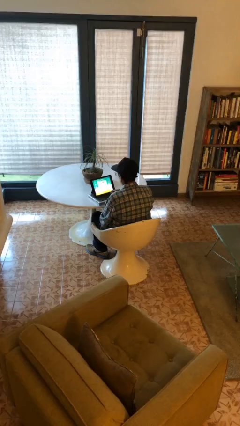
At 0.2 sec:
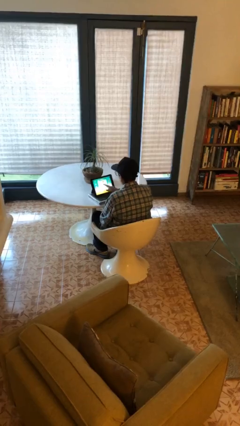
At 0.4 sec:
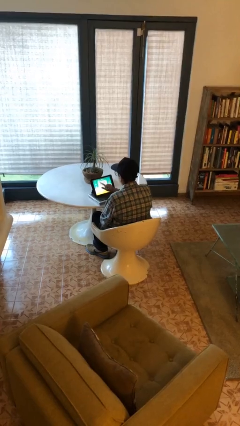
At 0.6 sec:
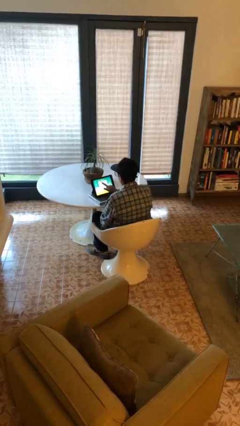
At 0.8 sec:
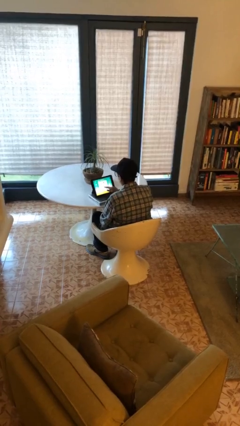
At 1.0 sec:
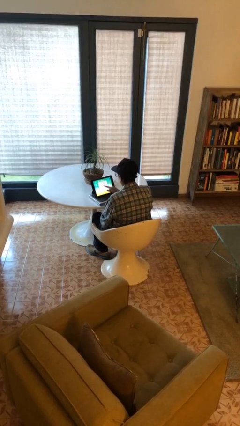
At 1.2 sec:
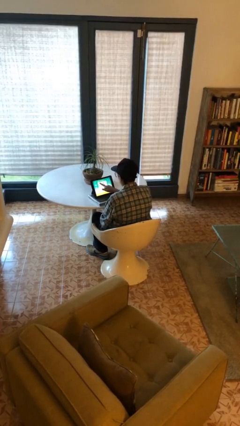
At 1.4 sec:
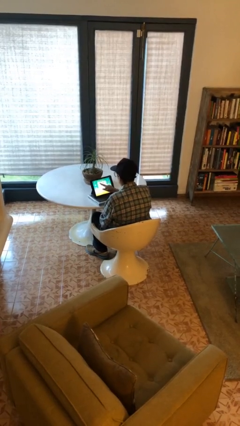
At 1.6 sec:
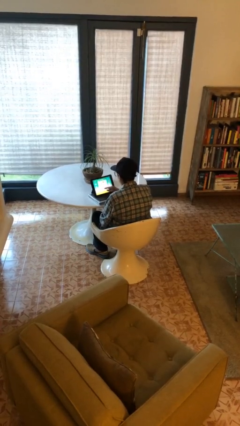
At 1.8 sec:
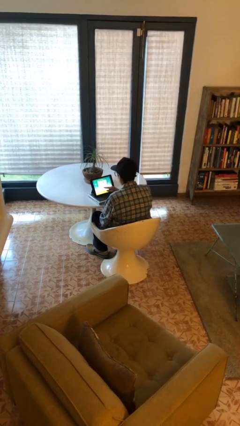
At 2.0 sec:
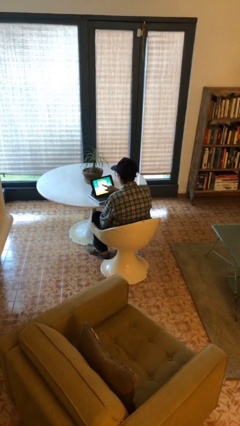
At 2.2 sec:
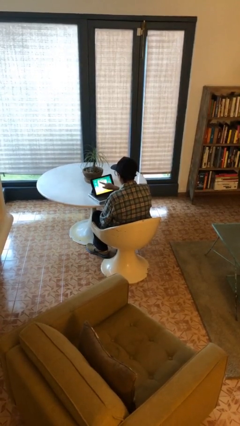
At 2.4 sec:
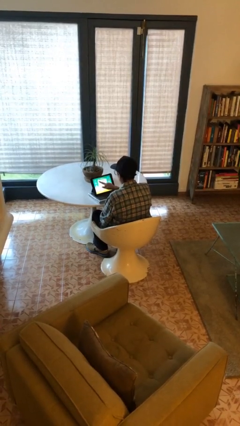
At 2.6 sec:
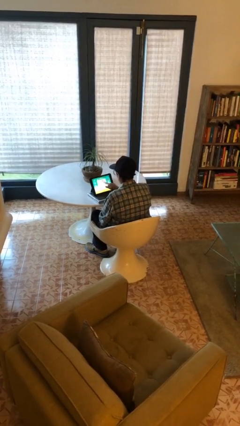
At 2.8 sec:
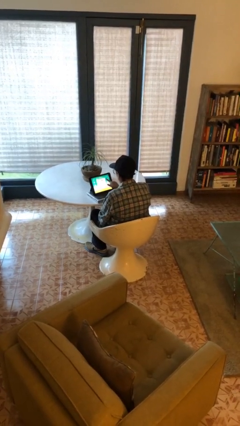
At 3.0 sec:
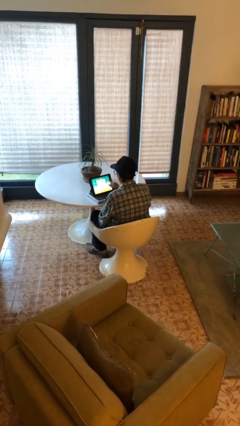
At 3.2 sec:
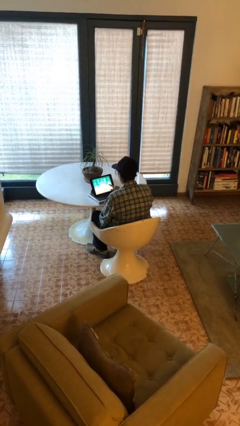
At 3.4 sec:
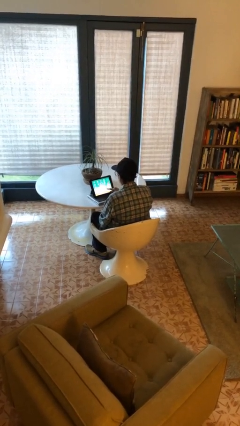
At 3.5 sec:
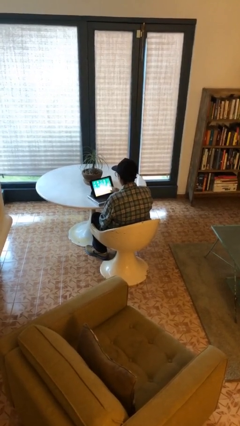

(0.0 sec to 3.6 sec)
person interacts with tablet

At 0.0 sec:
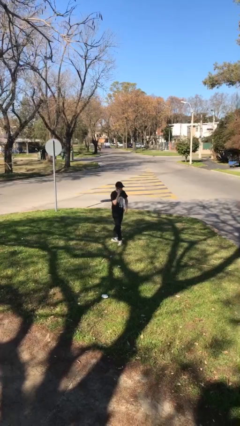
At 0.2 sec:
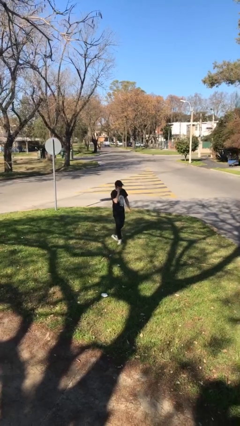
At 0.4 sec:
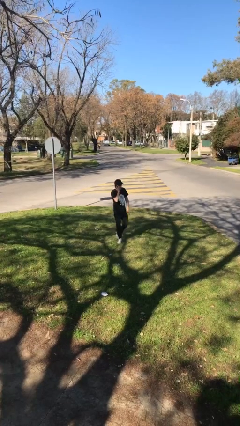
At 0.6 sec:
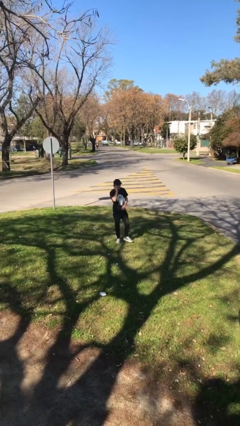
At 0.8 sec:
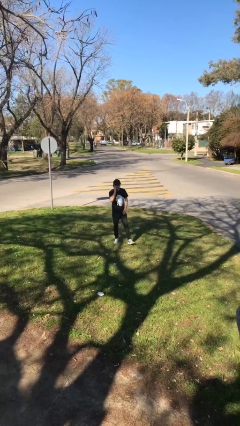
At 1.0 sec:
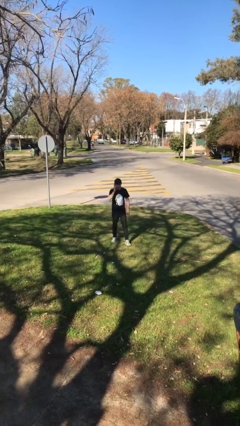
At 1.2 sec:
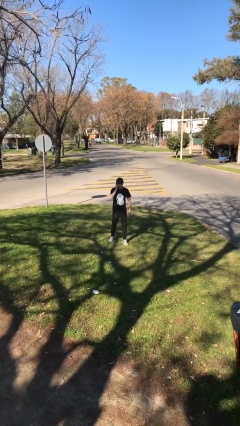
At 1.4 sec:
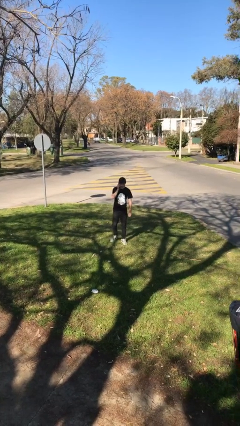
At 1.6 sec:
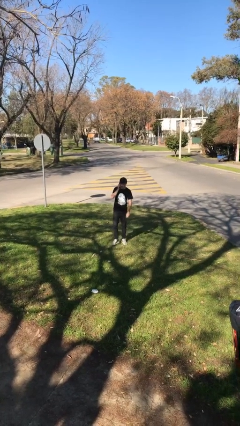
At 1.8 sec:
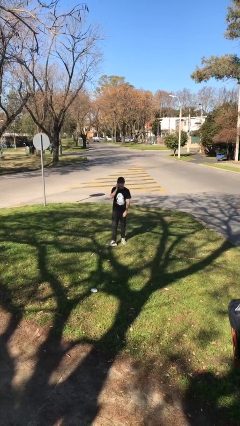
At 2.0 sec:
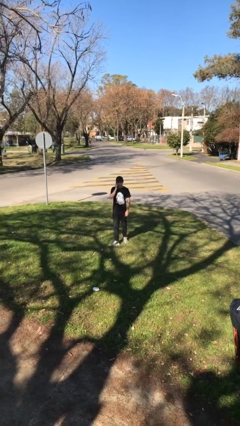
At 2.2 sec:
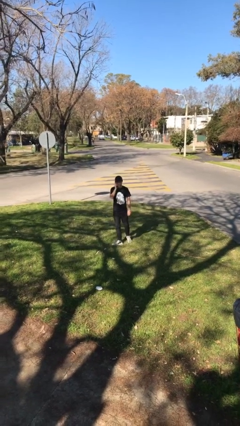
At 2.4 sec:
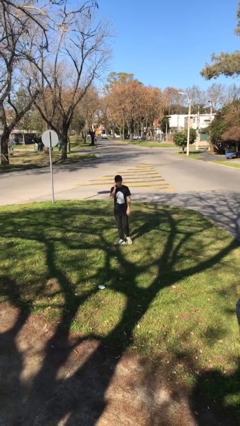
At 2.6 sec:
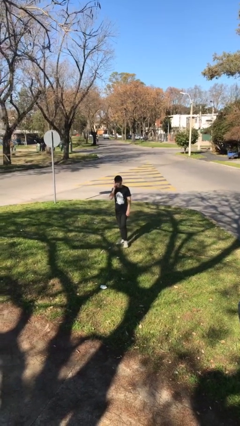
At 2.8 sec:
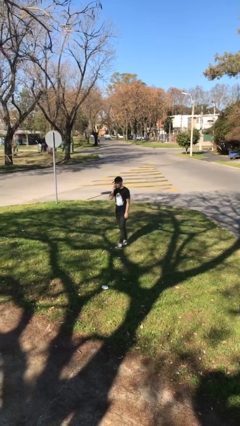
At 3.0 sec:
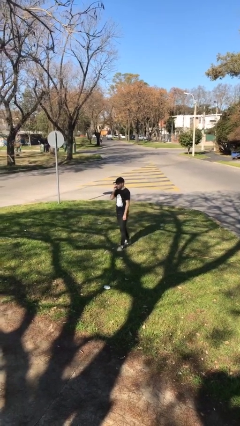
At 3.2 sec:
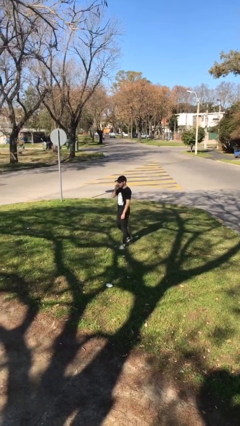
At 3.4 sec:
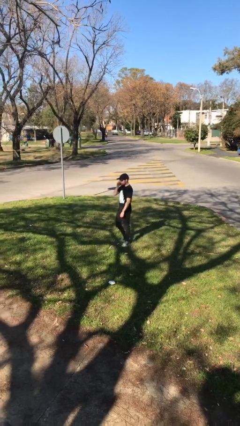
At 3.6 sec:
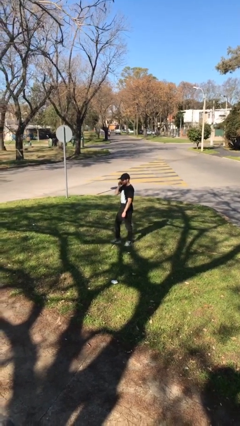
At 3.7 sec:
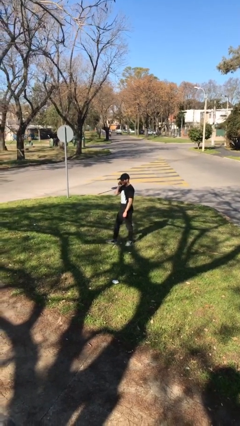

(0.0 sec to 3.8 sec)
person talks on phone

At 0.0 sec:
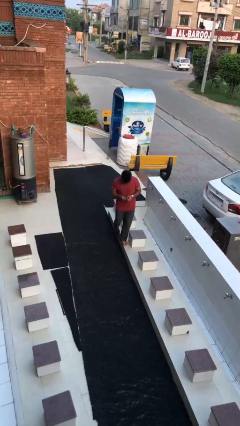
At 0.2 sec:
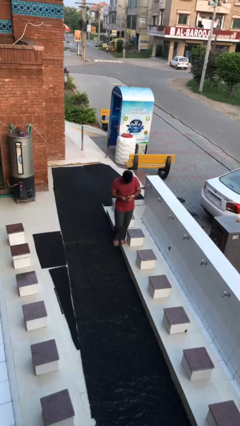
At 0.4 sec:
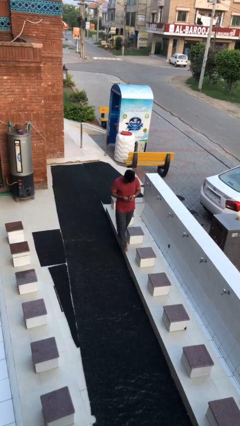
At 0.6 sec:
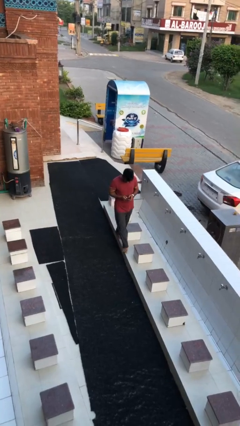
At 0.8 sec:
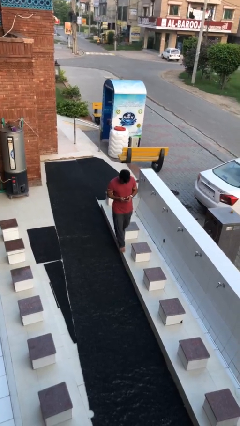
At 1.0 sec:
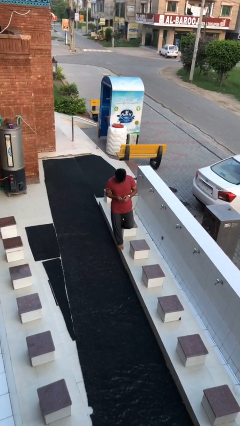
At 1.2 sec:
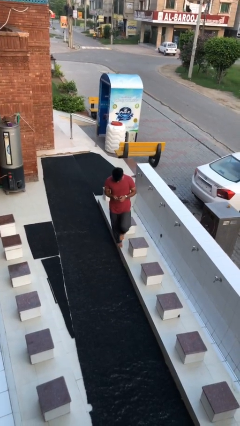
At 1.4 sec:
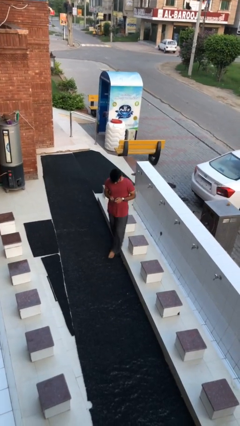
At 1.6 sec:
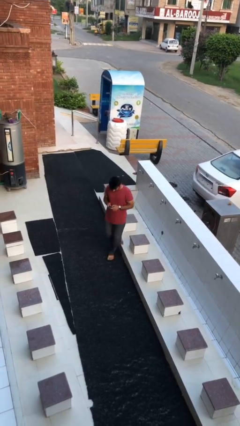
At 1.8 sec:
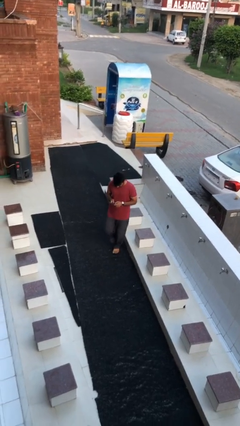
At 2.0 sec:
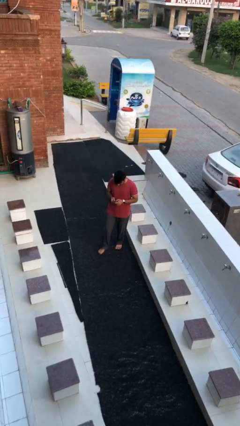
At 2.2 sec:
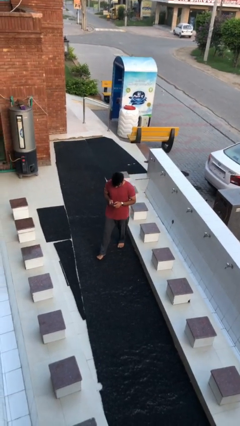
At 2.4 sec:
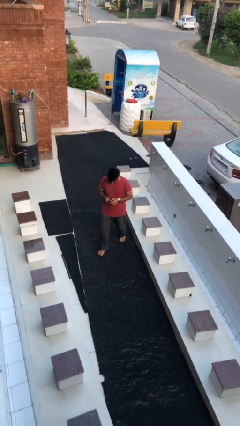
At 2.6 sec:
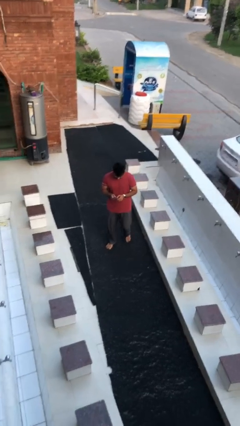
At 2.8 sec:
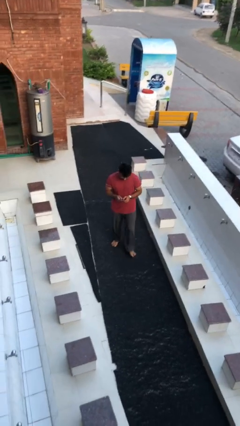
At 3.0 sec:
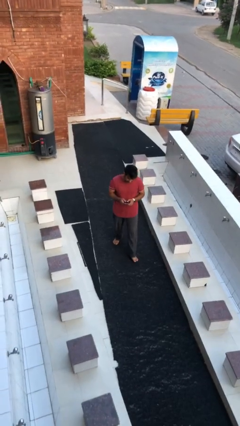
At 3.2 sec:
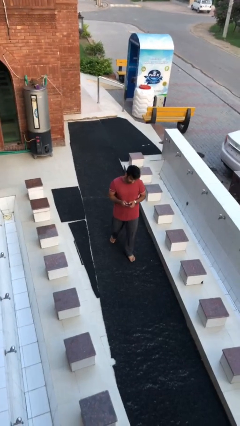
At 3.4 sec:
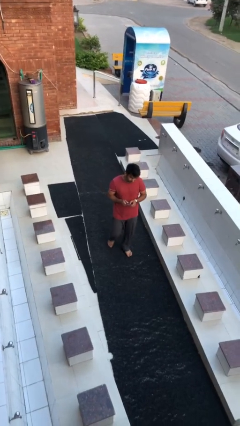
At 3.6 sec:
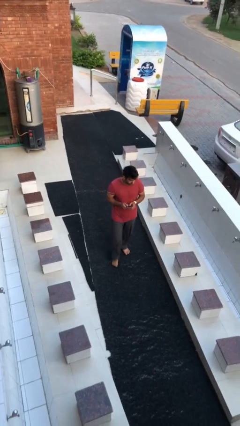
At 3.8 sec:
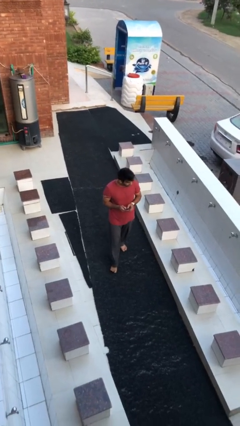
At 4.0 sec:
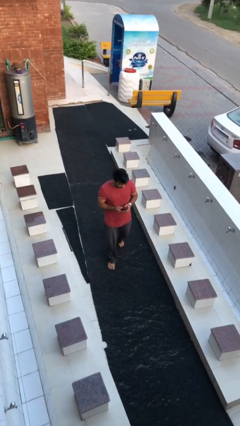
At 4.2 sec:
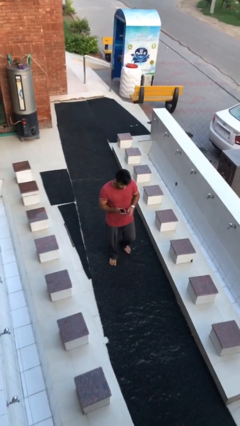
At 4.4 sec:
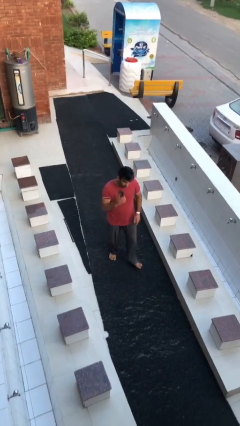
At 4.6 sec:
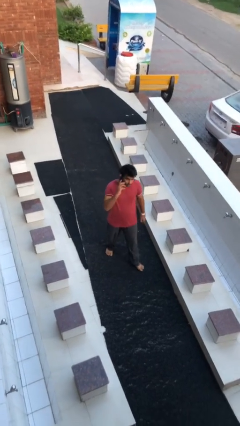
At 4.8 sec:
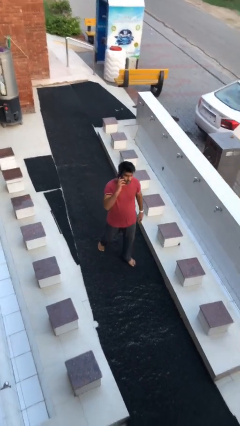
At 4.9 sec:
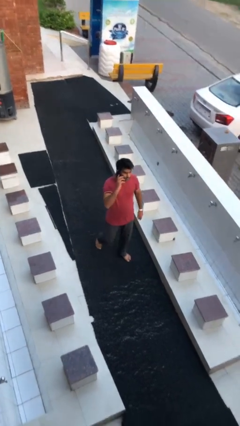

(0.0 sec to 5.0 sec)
person texts on phone

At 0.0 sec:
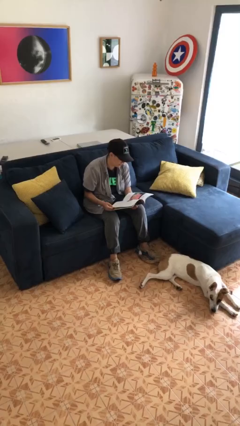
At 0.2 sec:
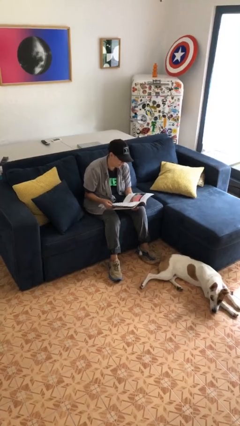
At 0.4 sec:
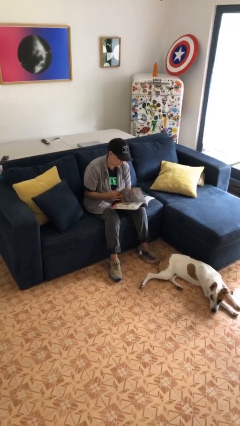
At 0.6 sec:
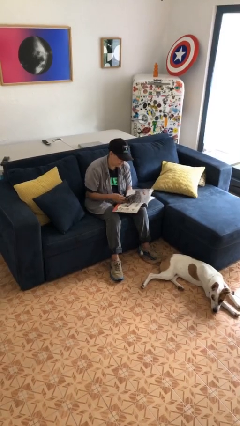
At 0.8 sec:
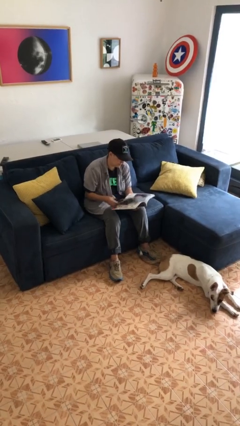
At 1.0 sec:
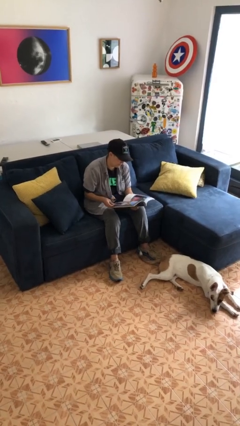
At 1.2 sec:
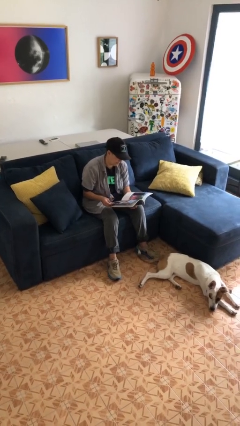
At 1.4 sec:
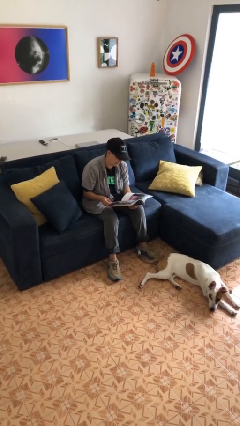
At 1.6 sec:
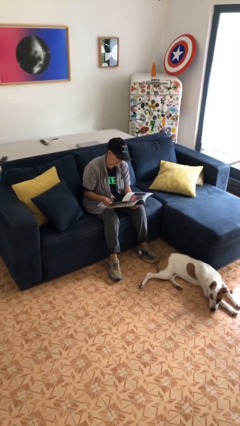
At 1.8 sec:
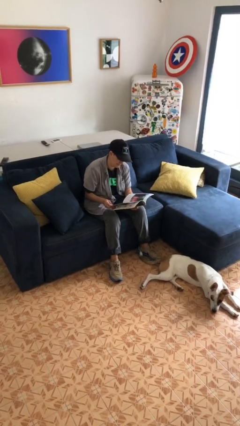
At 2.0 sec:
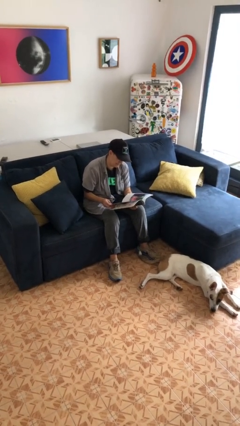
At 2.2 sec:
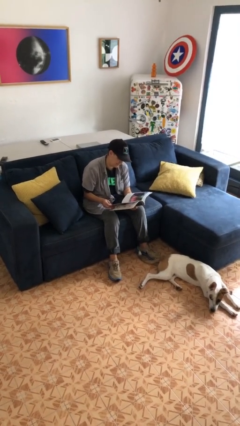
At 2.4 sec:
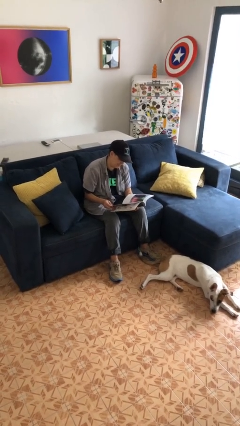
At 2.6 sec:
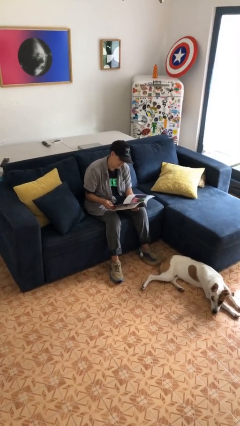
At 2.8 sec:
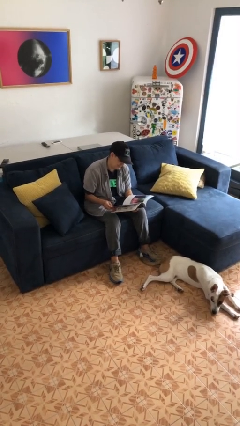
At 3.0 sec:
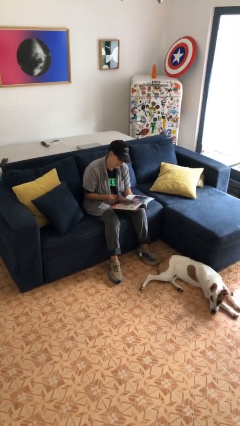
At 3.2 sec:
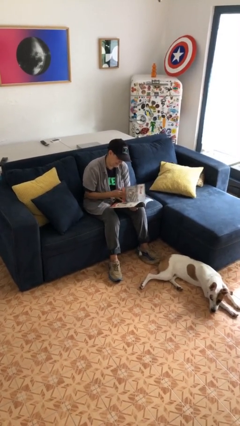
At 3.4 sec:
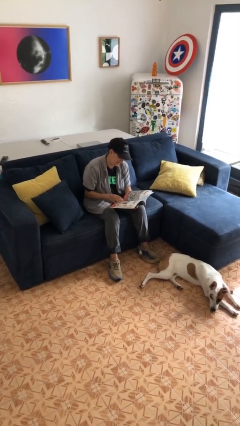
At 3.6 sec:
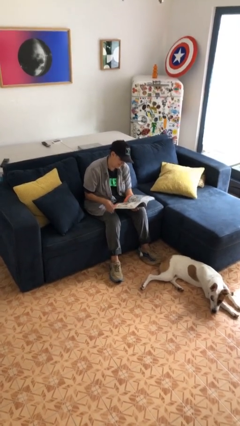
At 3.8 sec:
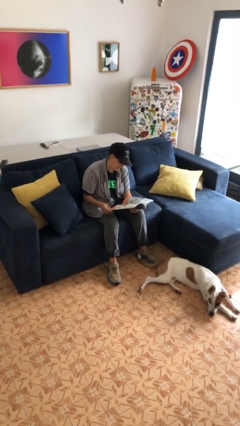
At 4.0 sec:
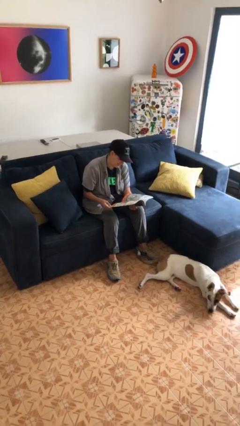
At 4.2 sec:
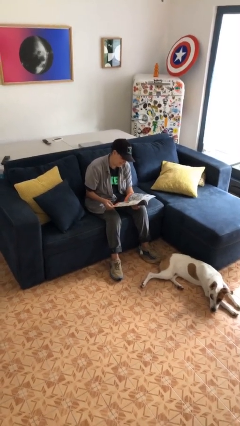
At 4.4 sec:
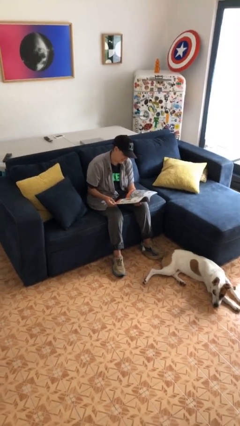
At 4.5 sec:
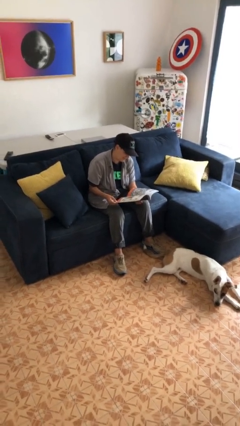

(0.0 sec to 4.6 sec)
person reads magazine

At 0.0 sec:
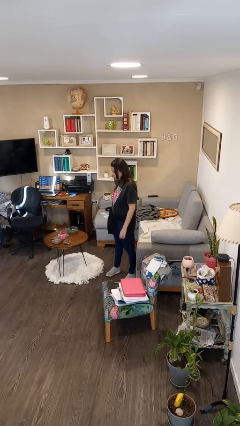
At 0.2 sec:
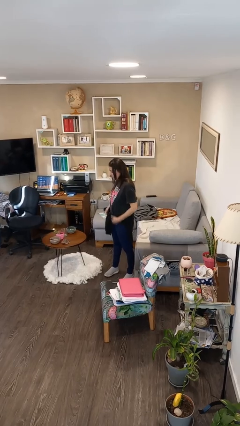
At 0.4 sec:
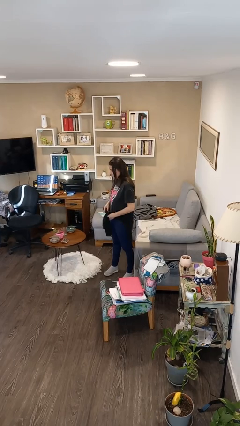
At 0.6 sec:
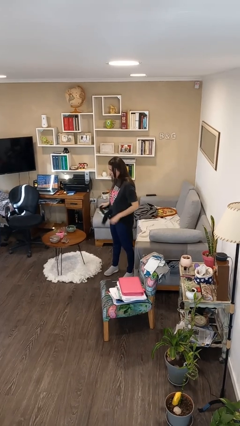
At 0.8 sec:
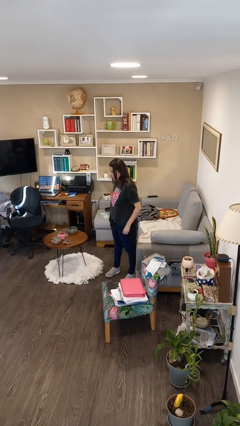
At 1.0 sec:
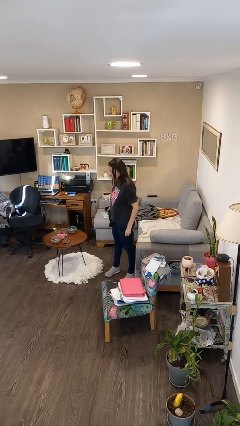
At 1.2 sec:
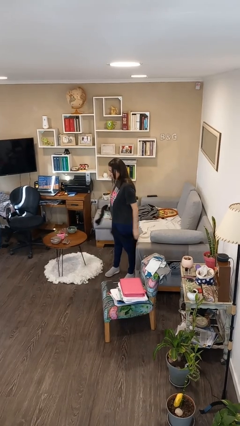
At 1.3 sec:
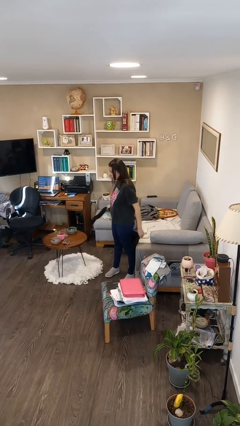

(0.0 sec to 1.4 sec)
person unties jacket around waist
